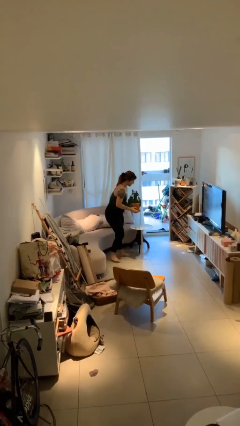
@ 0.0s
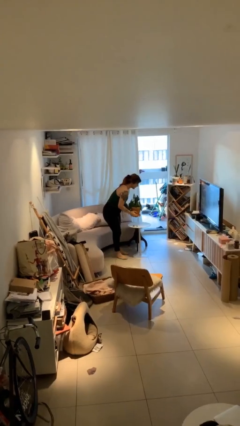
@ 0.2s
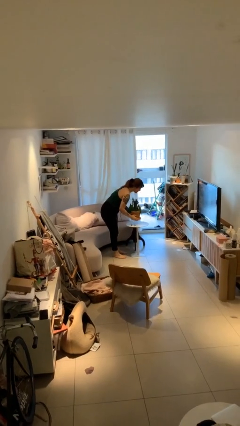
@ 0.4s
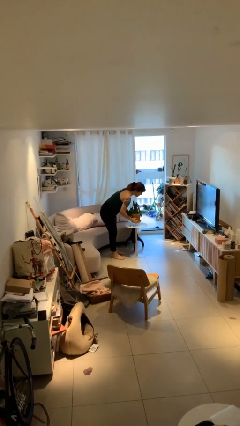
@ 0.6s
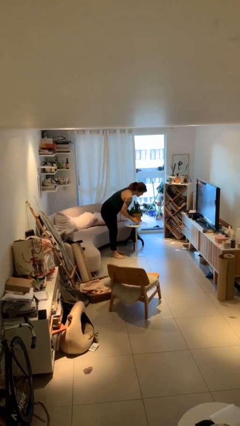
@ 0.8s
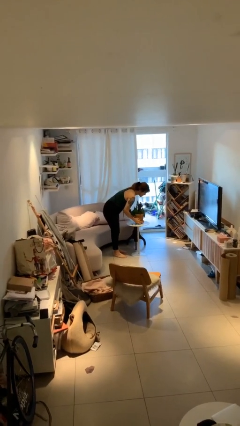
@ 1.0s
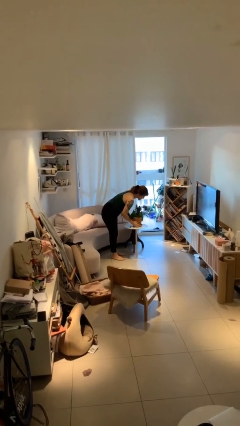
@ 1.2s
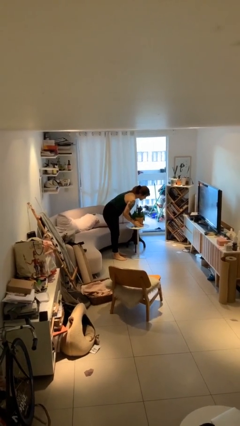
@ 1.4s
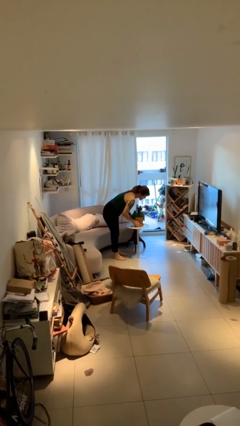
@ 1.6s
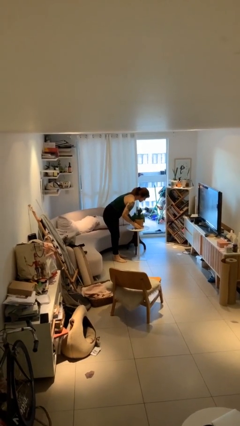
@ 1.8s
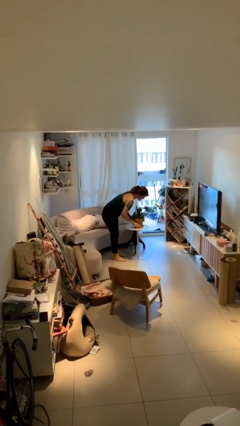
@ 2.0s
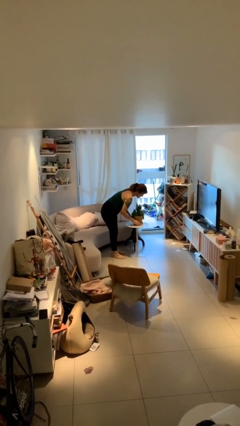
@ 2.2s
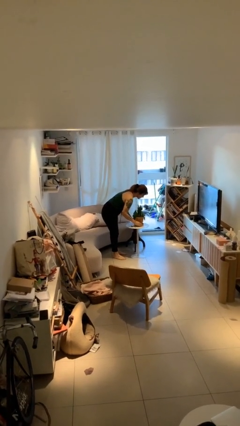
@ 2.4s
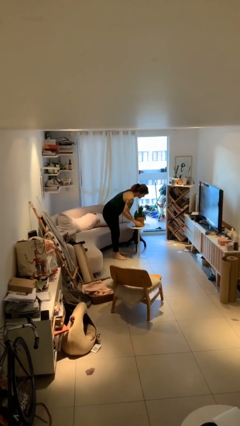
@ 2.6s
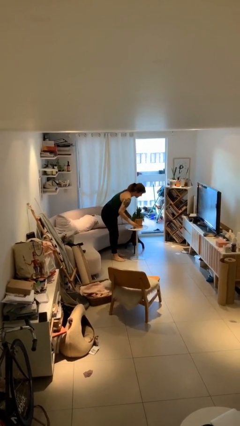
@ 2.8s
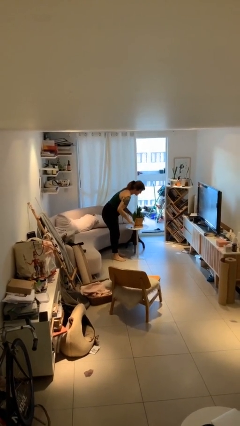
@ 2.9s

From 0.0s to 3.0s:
person puts down object on table

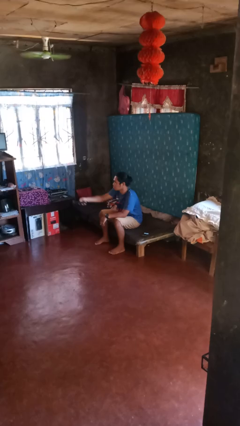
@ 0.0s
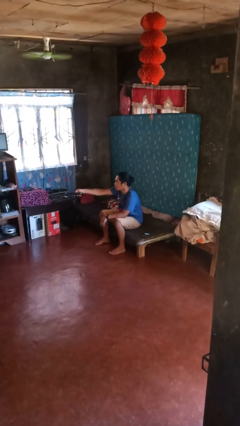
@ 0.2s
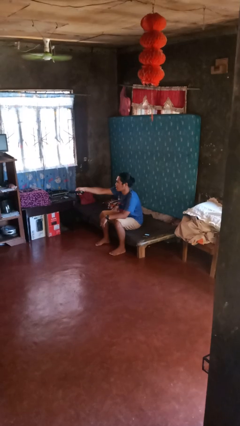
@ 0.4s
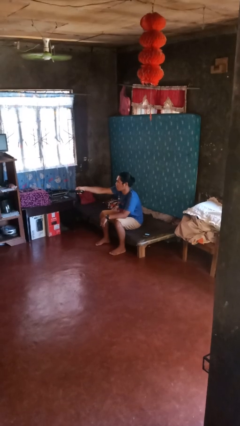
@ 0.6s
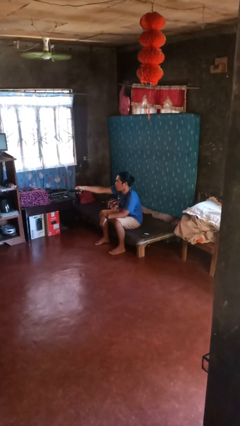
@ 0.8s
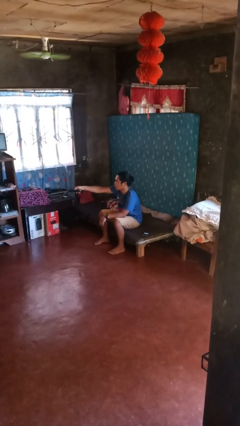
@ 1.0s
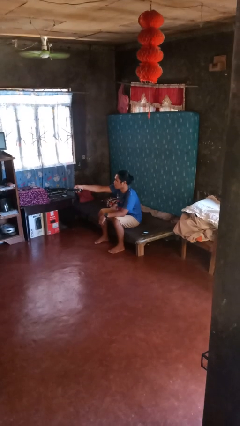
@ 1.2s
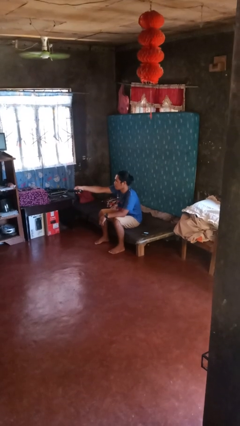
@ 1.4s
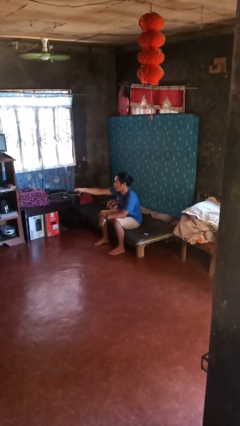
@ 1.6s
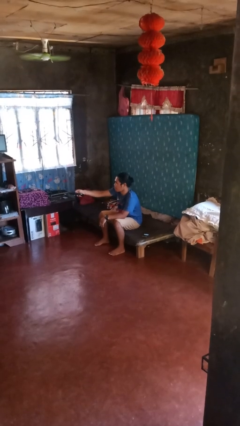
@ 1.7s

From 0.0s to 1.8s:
person uses television remote

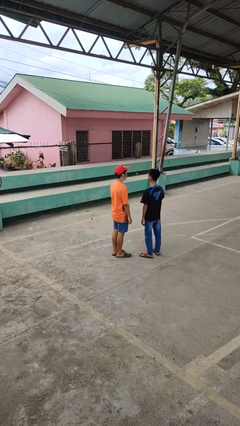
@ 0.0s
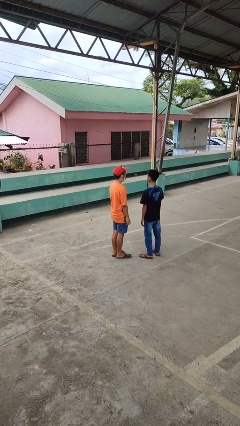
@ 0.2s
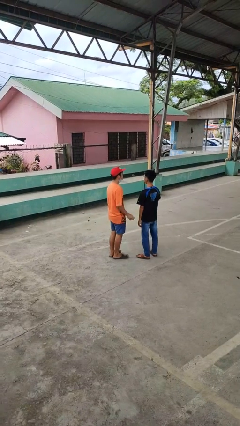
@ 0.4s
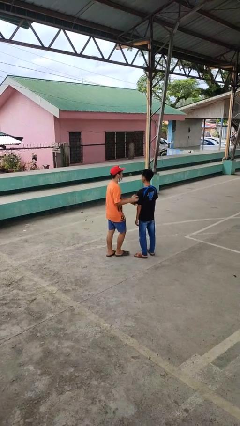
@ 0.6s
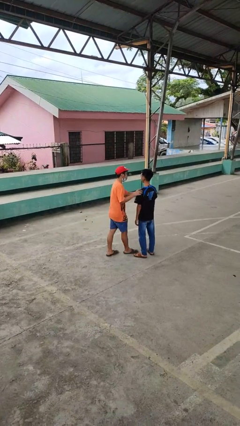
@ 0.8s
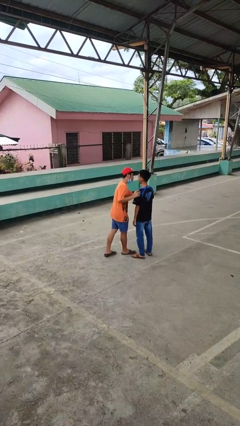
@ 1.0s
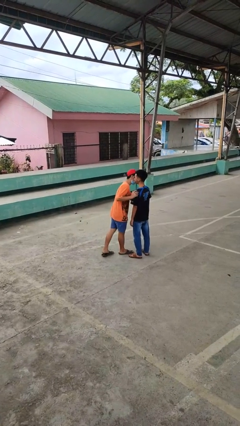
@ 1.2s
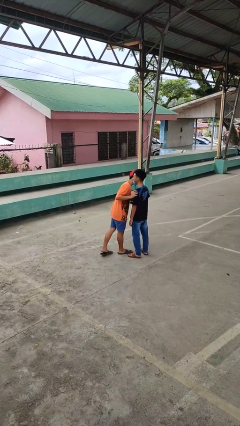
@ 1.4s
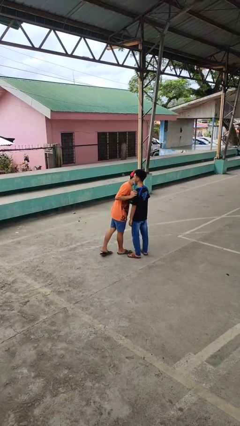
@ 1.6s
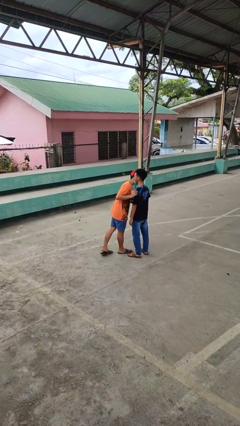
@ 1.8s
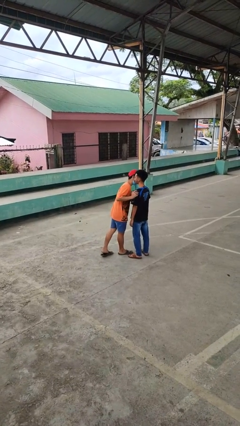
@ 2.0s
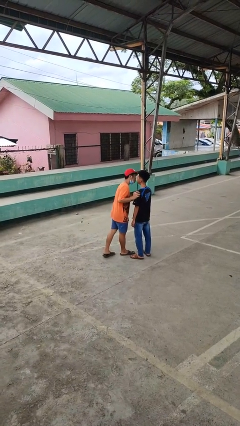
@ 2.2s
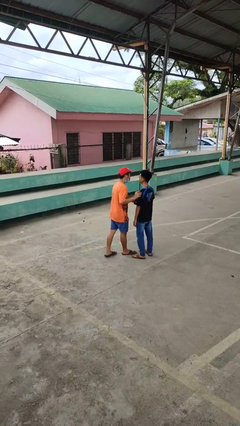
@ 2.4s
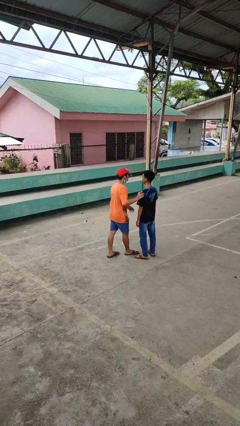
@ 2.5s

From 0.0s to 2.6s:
person kisses cheek of person

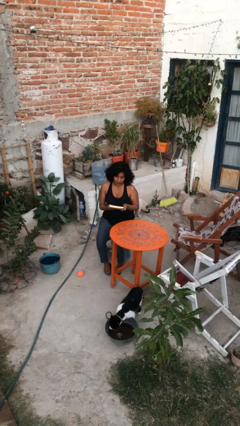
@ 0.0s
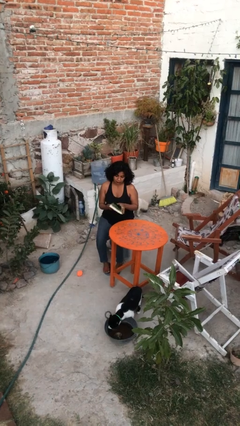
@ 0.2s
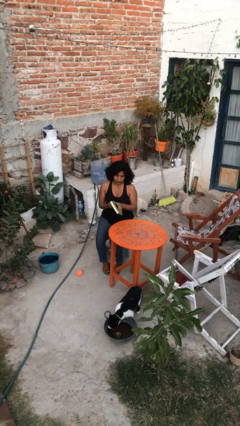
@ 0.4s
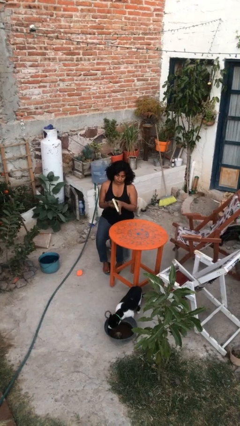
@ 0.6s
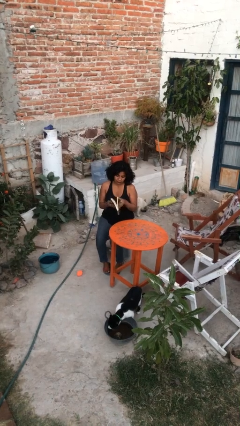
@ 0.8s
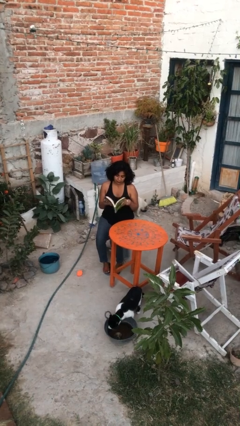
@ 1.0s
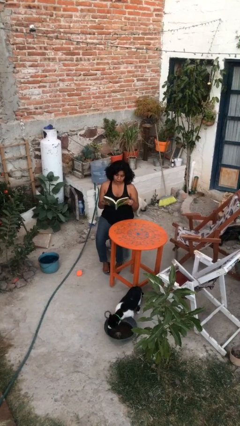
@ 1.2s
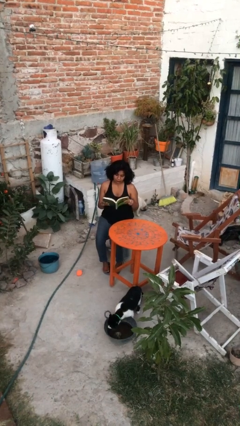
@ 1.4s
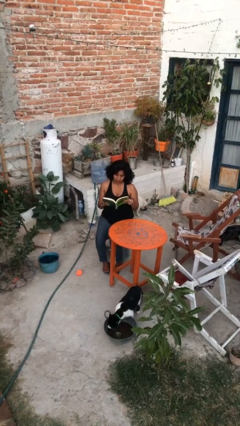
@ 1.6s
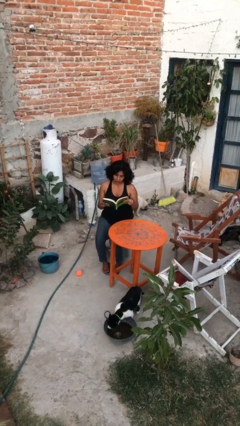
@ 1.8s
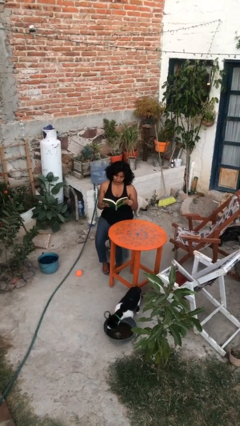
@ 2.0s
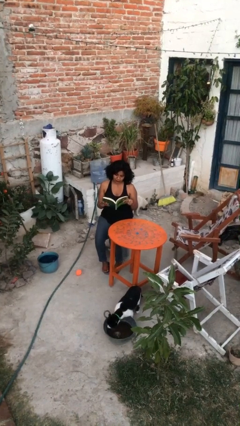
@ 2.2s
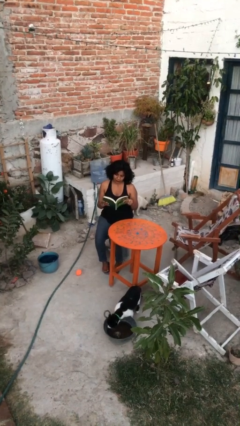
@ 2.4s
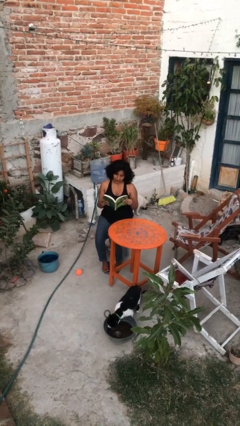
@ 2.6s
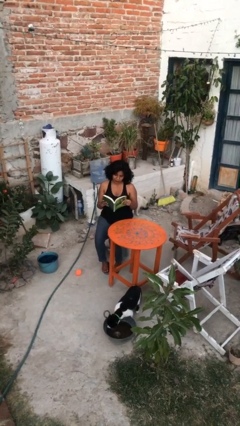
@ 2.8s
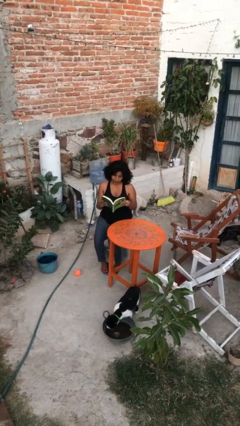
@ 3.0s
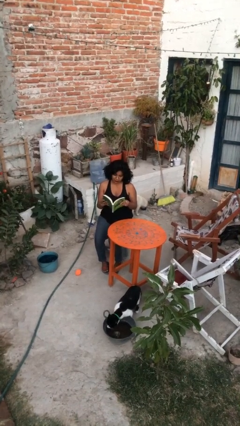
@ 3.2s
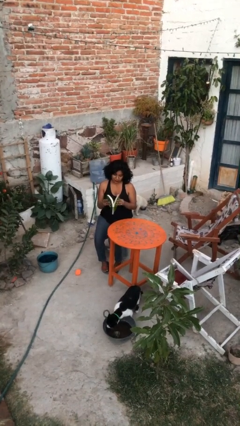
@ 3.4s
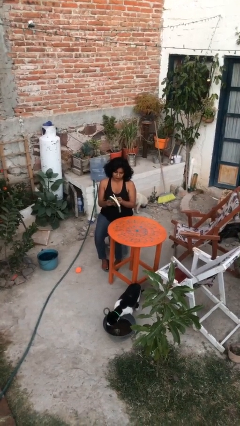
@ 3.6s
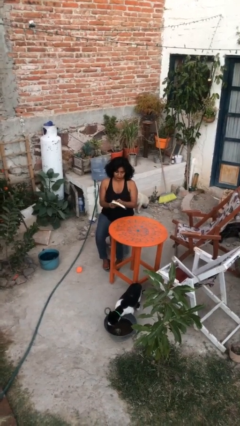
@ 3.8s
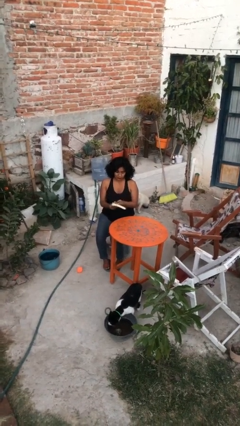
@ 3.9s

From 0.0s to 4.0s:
person reads document

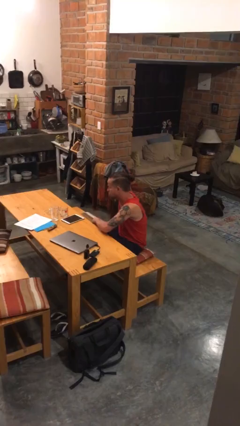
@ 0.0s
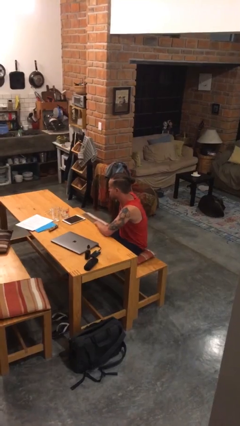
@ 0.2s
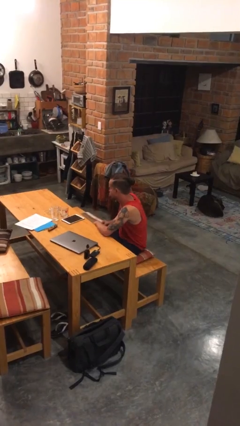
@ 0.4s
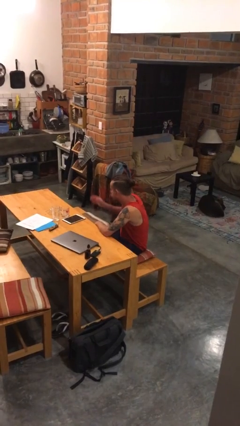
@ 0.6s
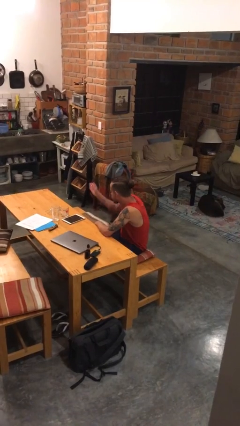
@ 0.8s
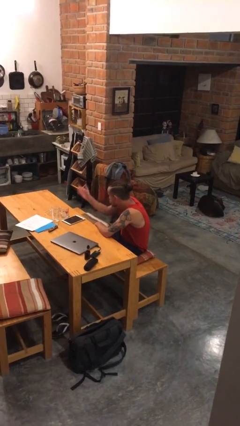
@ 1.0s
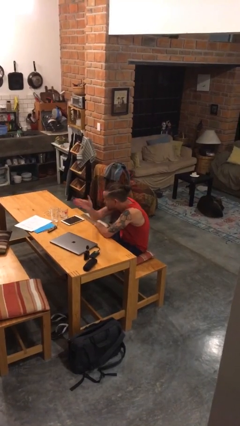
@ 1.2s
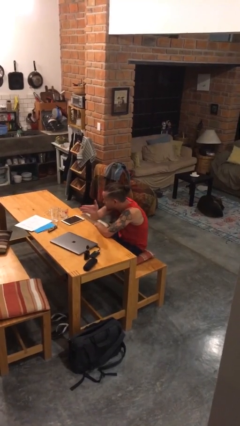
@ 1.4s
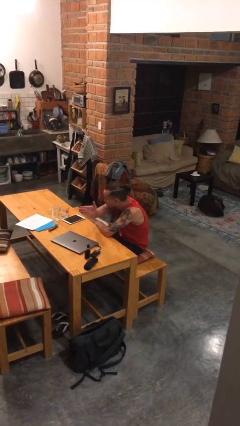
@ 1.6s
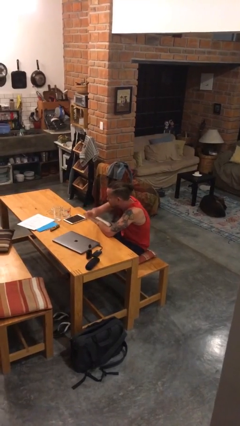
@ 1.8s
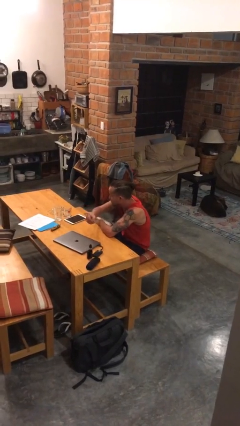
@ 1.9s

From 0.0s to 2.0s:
person gestures swipe left

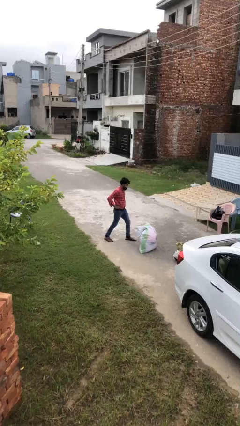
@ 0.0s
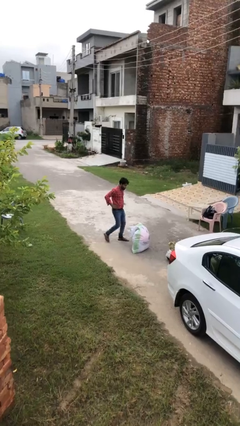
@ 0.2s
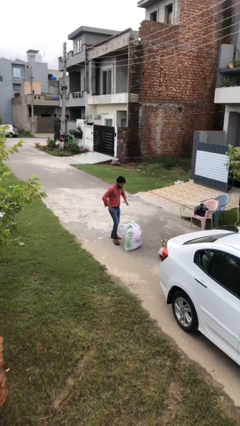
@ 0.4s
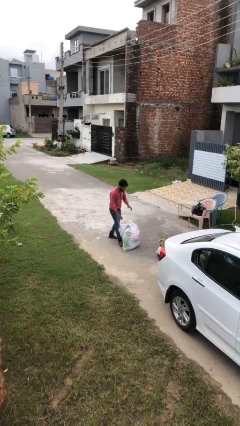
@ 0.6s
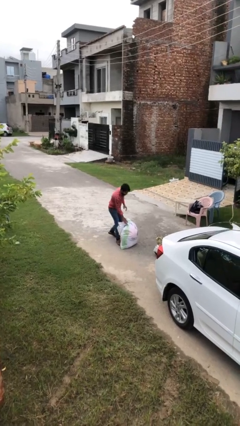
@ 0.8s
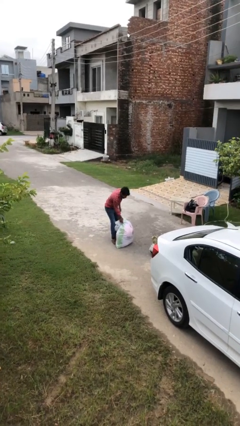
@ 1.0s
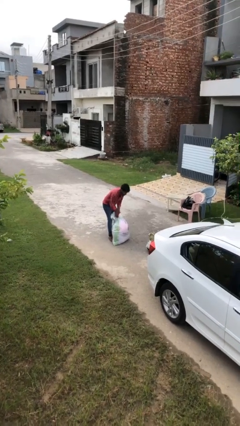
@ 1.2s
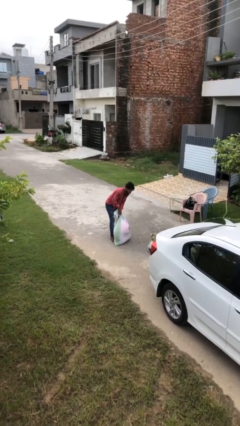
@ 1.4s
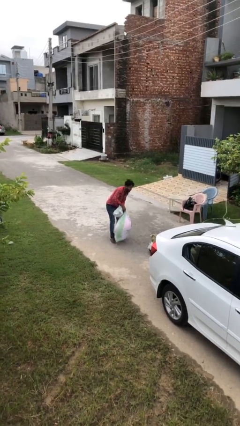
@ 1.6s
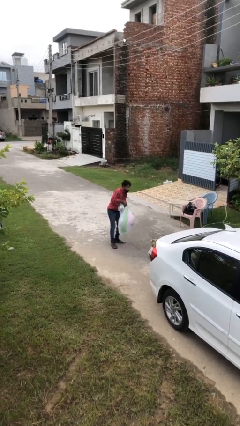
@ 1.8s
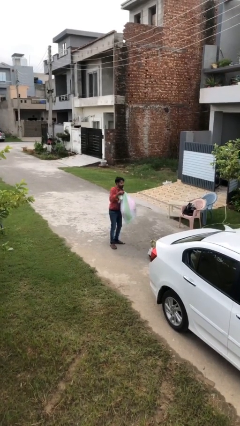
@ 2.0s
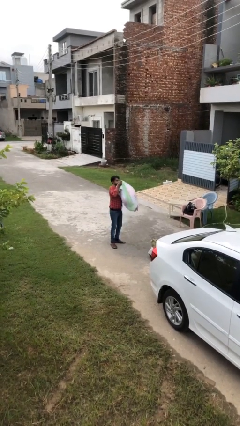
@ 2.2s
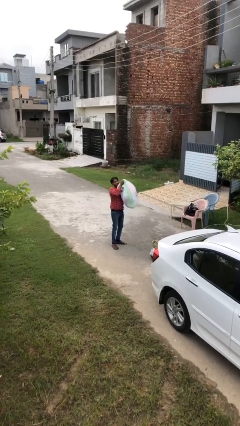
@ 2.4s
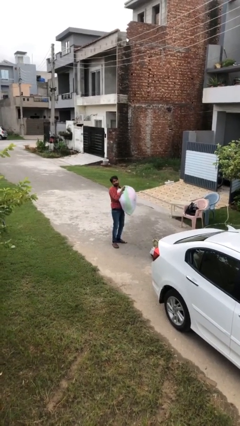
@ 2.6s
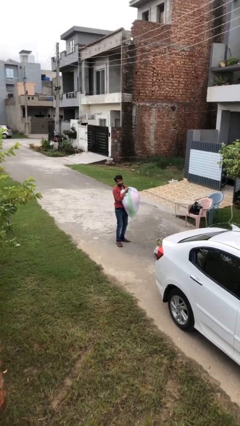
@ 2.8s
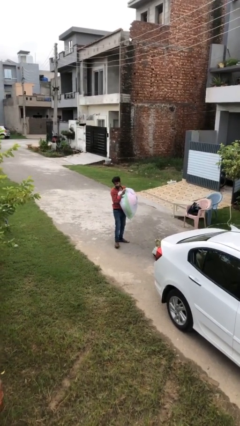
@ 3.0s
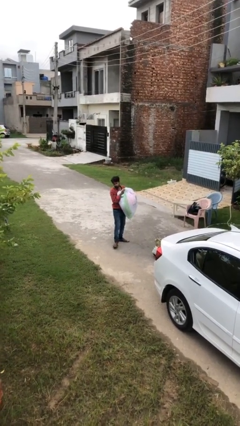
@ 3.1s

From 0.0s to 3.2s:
person picks up object from floor

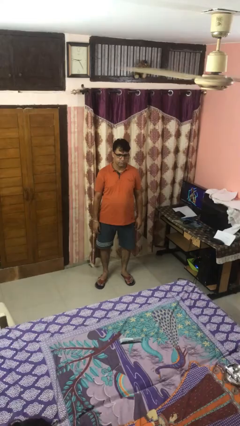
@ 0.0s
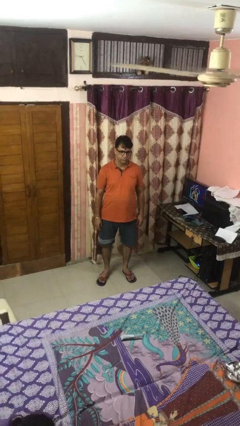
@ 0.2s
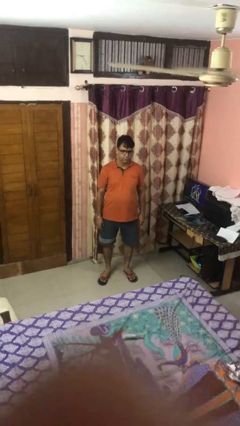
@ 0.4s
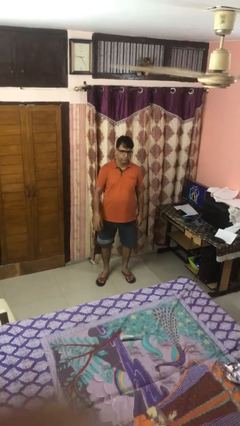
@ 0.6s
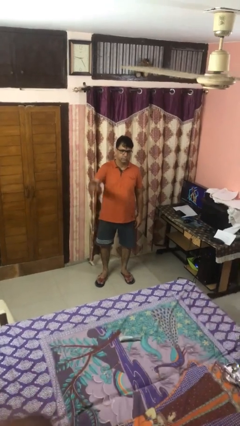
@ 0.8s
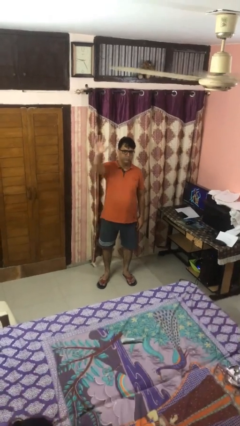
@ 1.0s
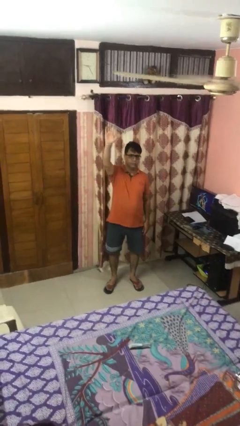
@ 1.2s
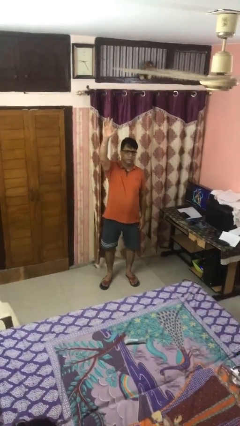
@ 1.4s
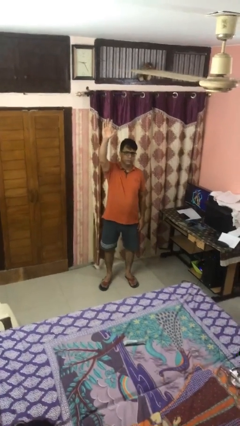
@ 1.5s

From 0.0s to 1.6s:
person gestures raise hand
